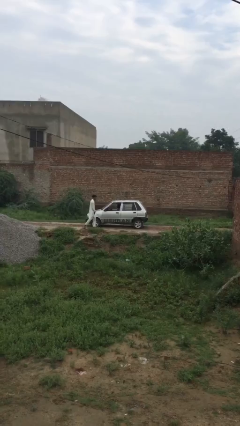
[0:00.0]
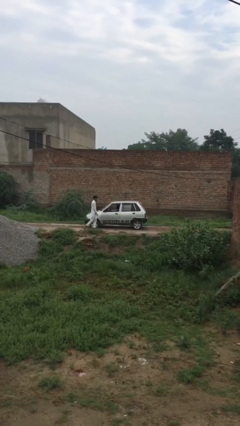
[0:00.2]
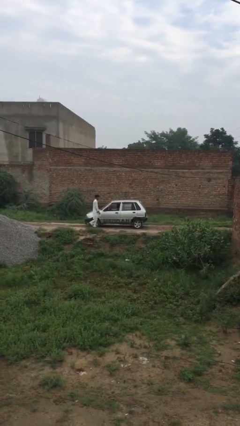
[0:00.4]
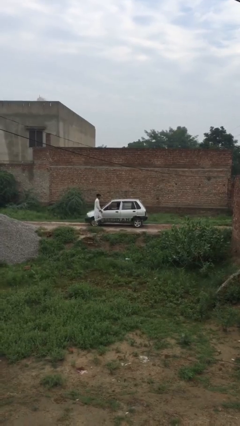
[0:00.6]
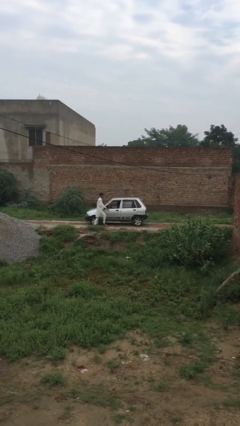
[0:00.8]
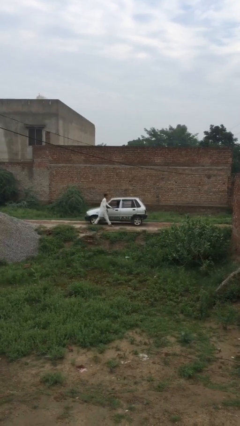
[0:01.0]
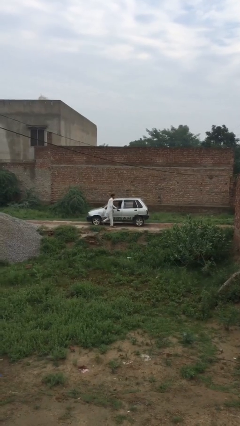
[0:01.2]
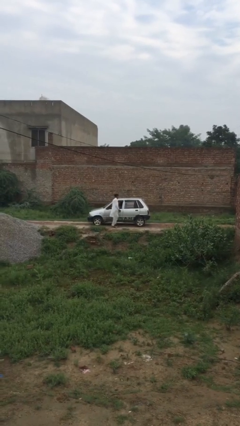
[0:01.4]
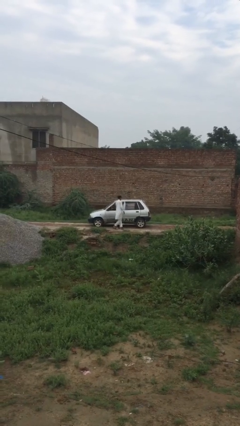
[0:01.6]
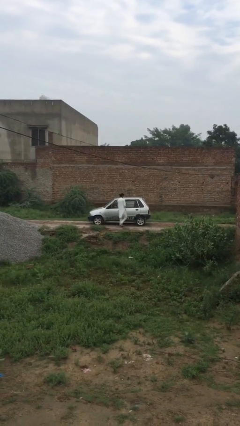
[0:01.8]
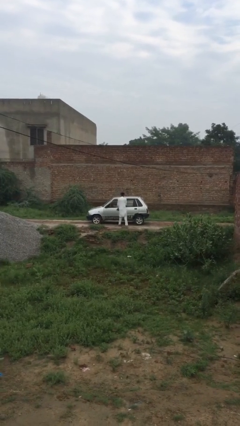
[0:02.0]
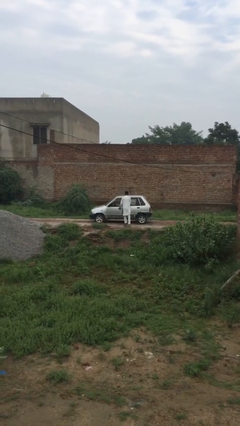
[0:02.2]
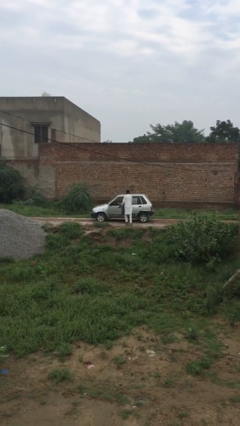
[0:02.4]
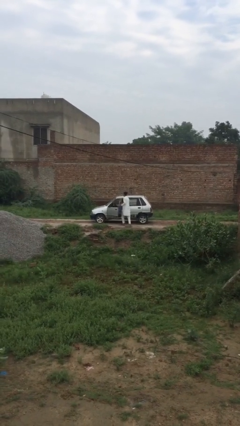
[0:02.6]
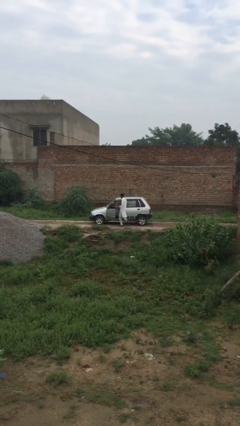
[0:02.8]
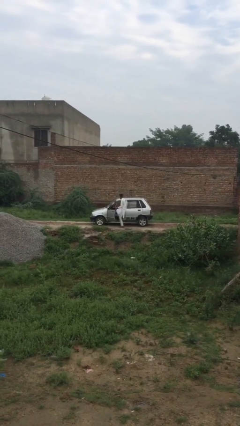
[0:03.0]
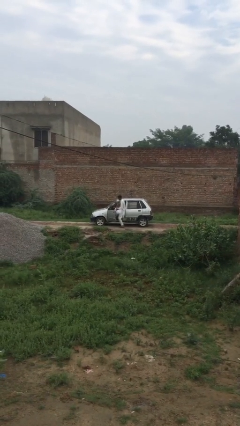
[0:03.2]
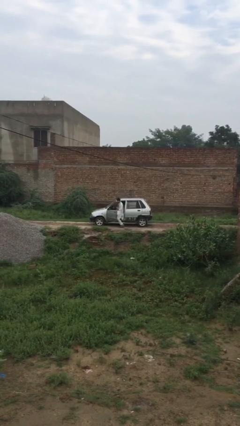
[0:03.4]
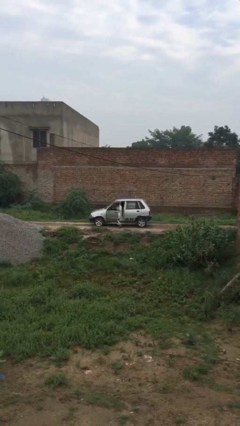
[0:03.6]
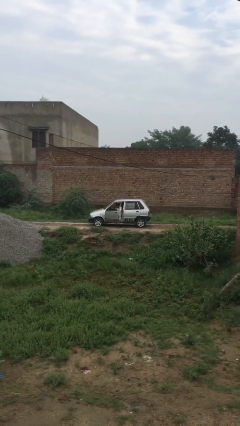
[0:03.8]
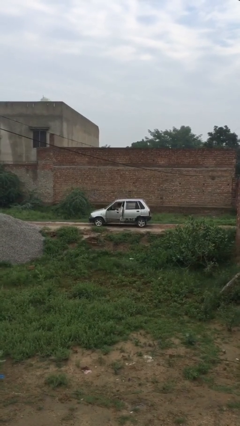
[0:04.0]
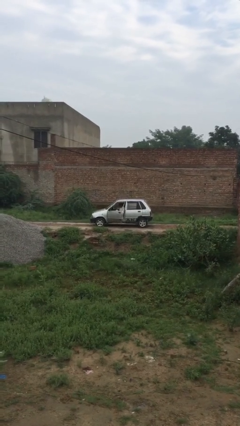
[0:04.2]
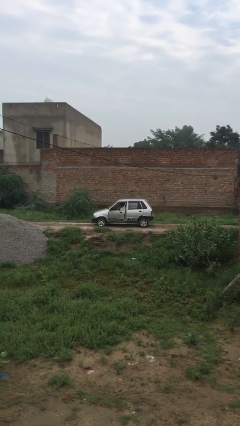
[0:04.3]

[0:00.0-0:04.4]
car picks up person

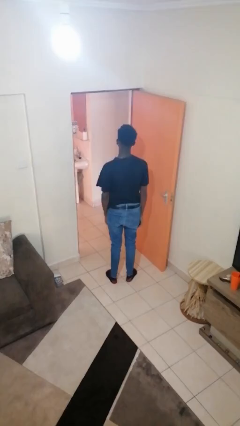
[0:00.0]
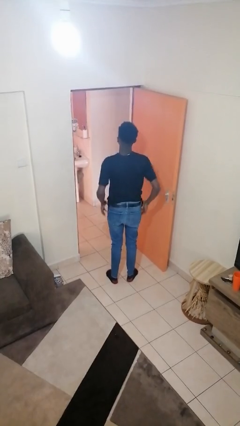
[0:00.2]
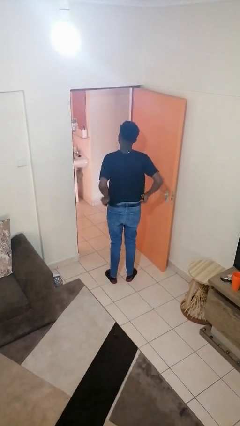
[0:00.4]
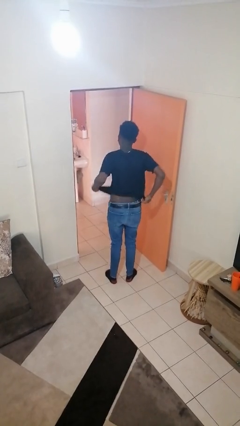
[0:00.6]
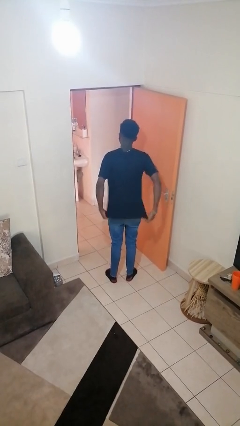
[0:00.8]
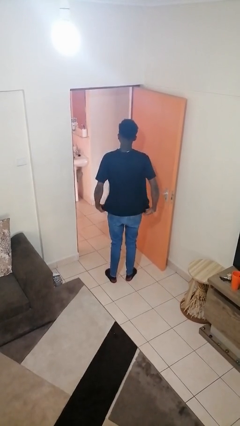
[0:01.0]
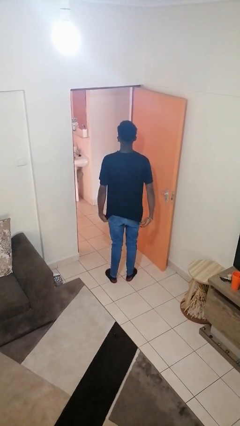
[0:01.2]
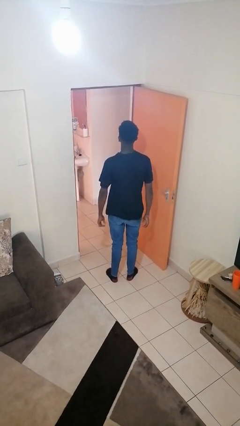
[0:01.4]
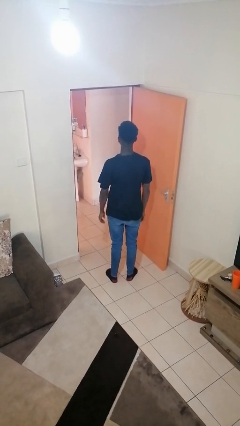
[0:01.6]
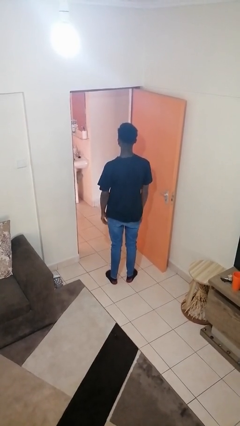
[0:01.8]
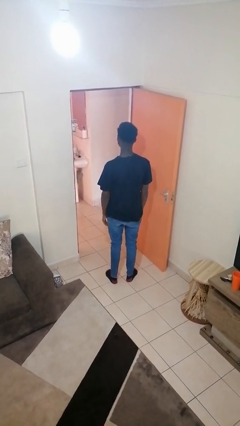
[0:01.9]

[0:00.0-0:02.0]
person untucks shirt

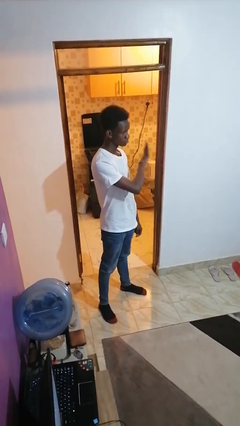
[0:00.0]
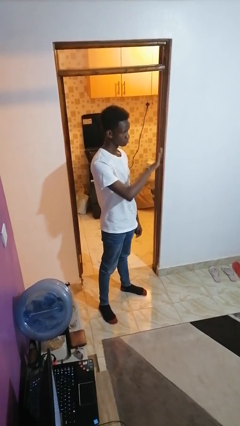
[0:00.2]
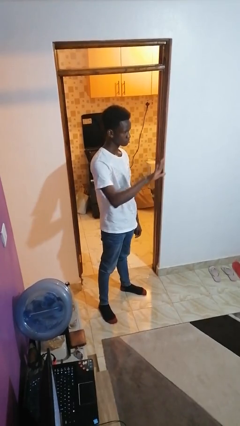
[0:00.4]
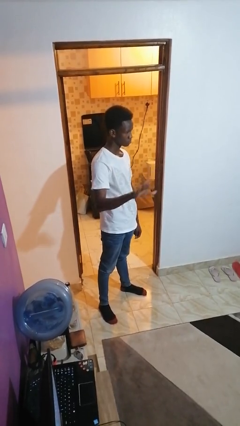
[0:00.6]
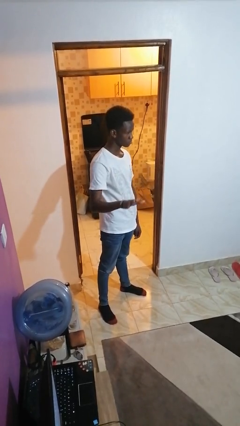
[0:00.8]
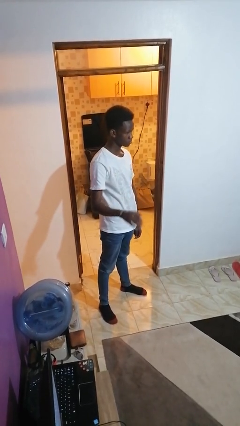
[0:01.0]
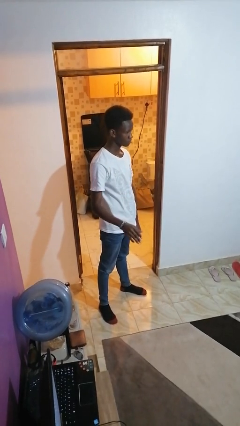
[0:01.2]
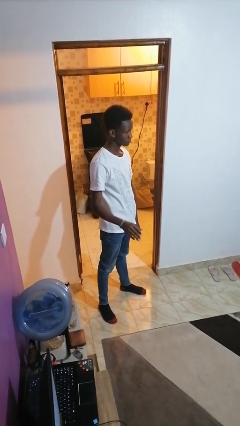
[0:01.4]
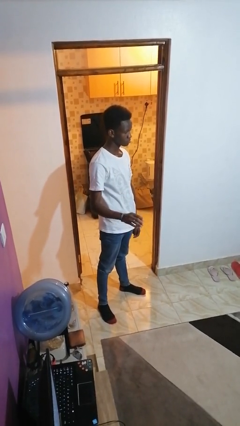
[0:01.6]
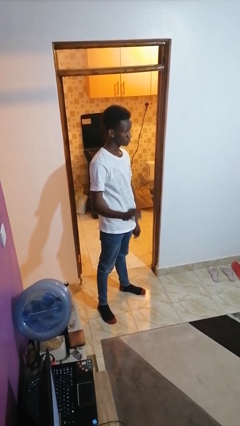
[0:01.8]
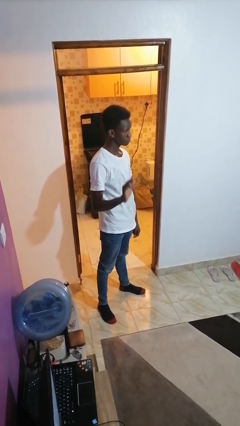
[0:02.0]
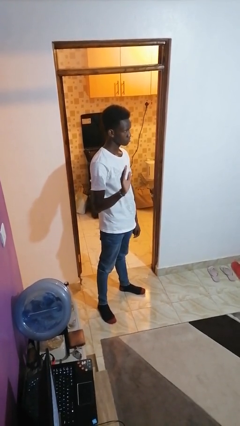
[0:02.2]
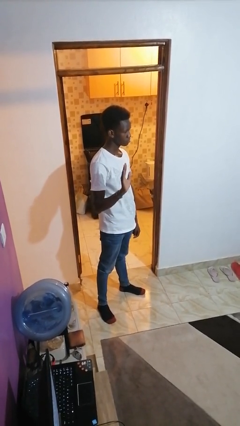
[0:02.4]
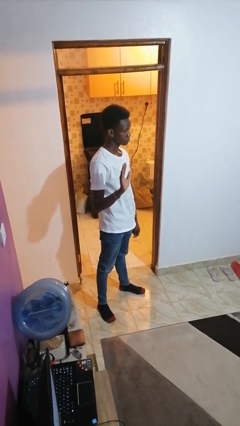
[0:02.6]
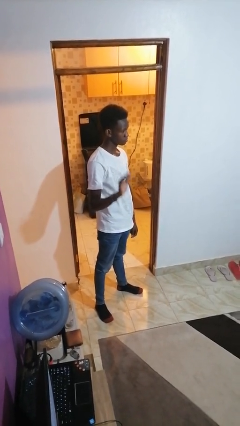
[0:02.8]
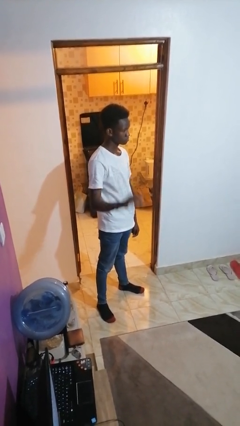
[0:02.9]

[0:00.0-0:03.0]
person gestures swipe right

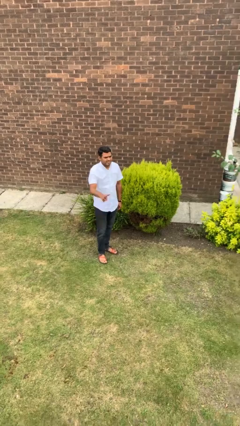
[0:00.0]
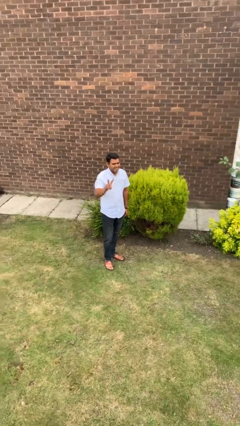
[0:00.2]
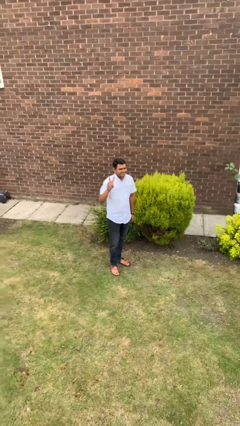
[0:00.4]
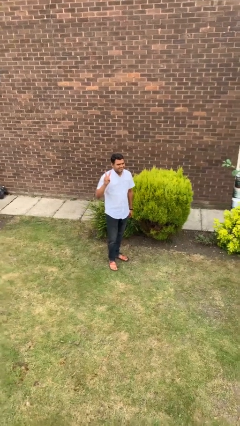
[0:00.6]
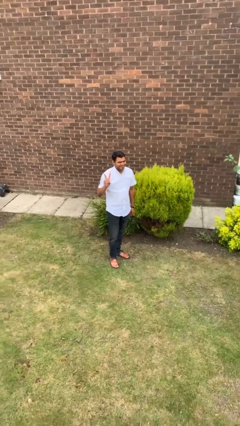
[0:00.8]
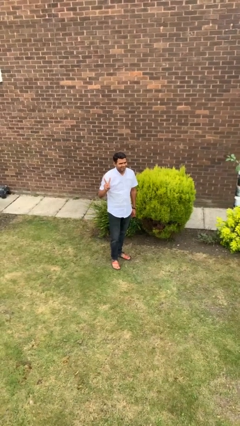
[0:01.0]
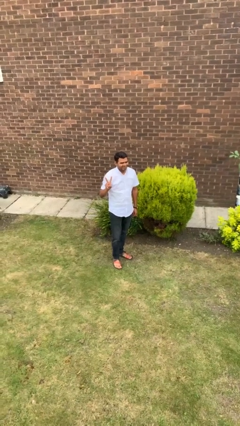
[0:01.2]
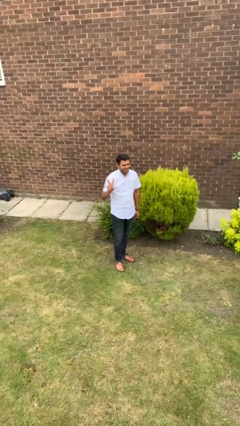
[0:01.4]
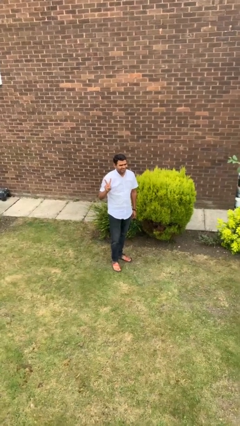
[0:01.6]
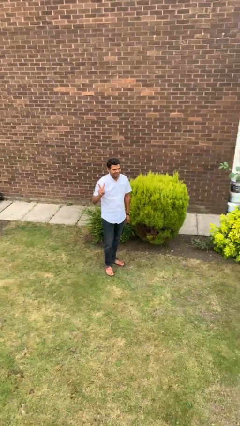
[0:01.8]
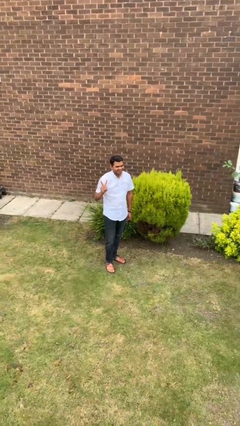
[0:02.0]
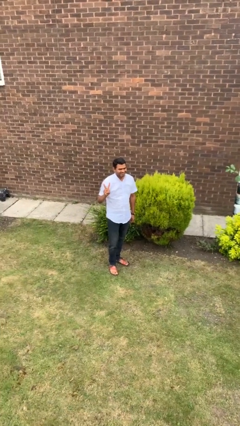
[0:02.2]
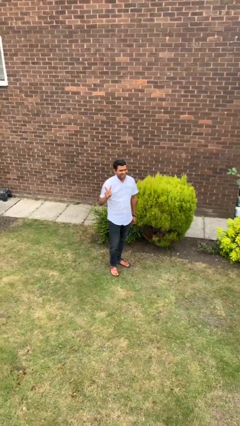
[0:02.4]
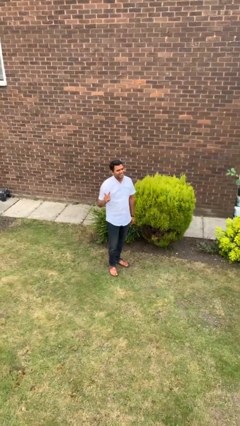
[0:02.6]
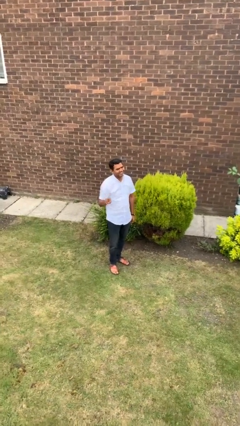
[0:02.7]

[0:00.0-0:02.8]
person gestures peace

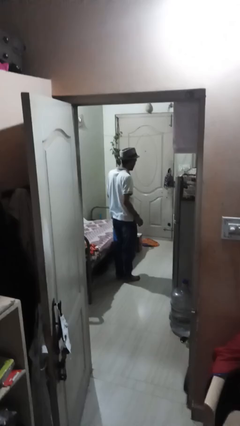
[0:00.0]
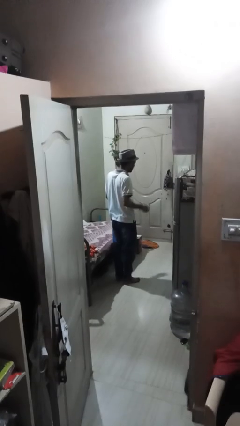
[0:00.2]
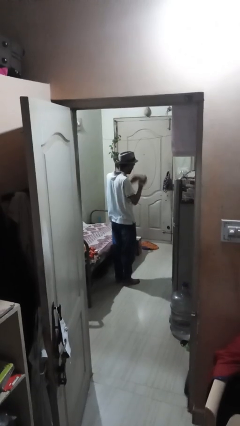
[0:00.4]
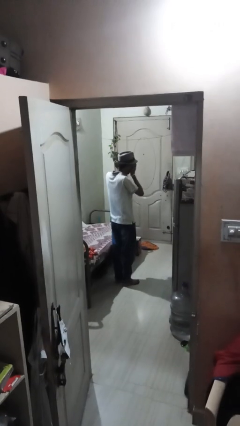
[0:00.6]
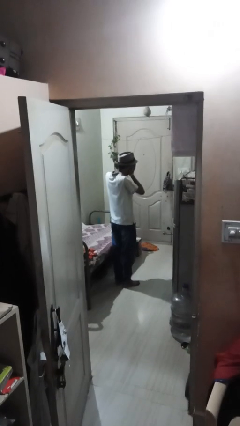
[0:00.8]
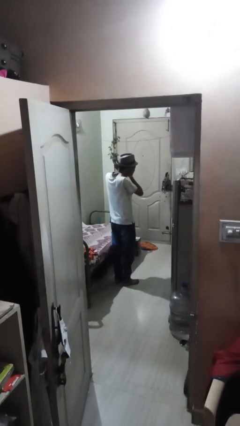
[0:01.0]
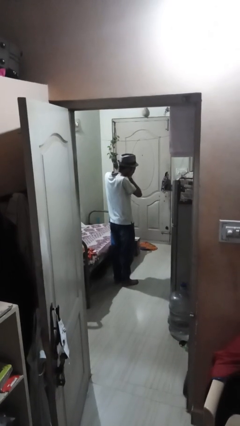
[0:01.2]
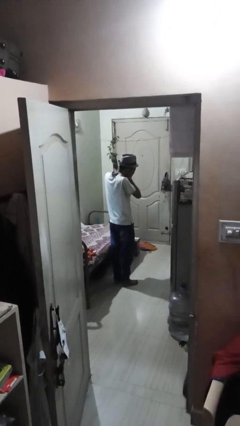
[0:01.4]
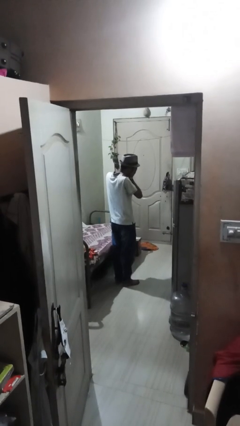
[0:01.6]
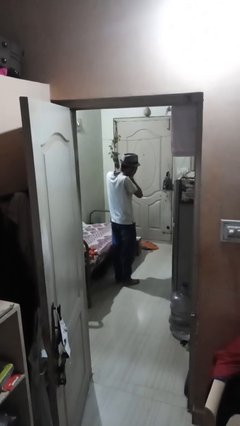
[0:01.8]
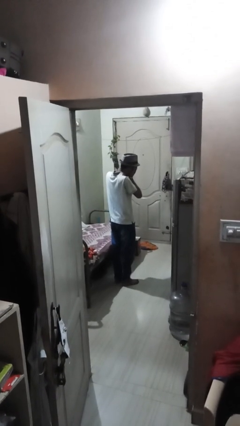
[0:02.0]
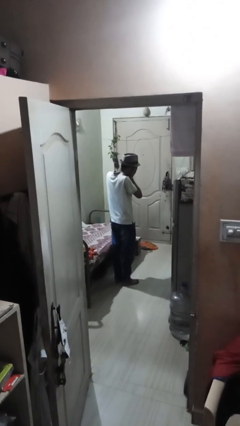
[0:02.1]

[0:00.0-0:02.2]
person covers face with hands

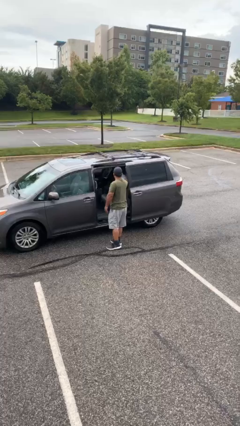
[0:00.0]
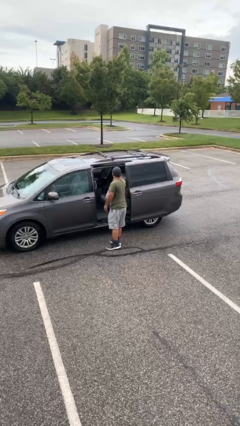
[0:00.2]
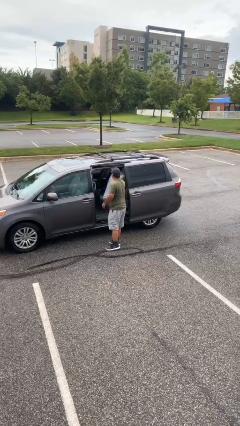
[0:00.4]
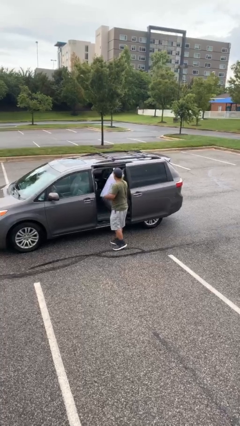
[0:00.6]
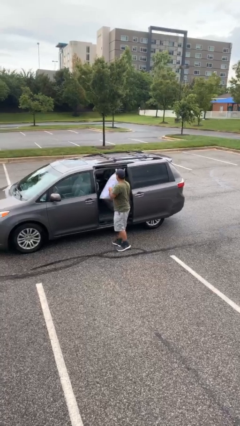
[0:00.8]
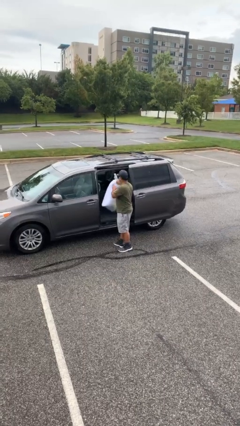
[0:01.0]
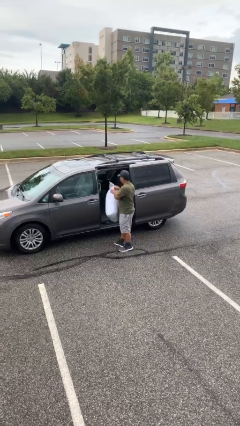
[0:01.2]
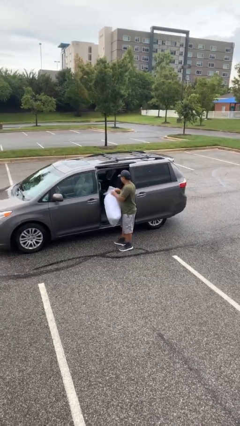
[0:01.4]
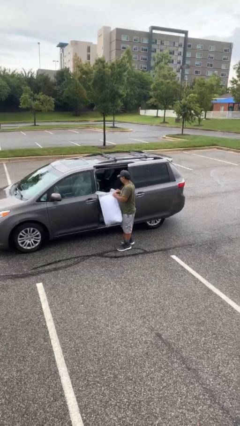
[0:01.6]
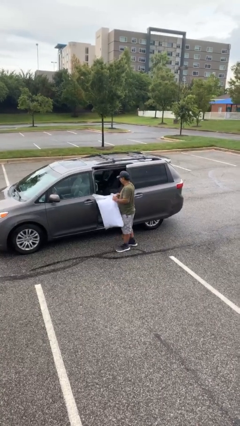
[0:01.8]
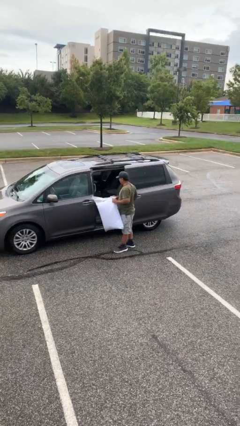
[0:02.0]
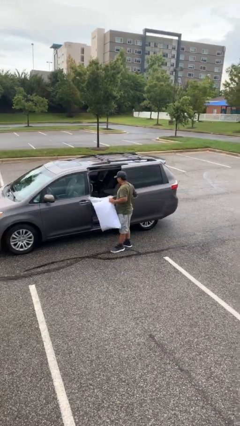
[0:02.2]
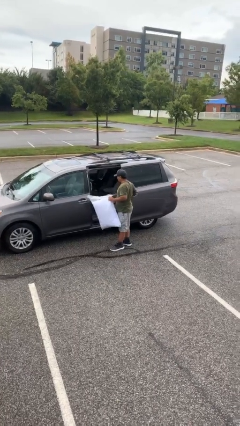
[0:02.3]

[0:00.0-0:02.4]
person unloads car

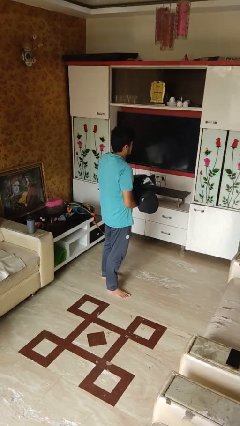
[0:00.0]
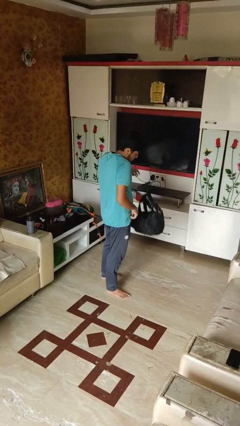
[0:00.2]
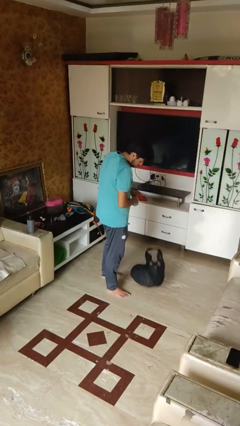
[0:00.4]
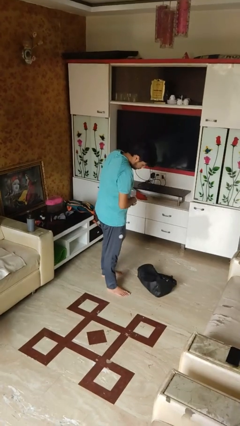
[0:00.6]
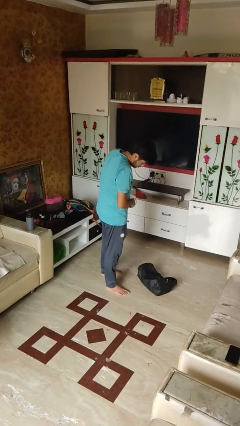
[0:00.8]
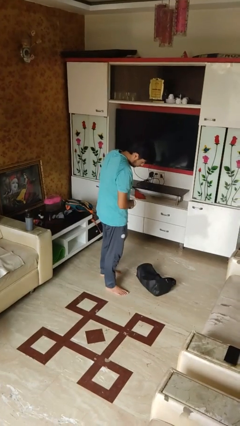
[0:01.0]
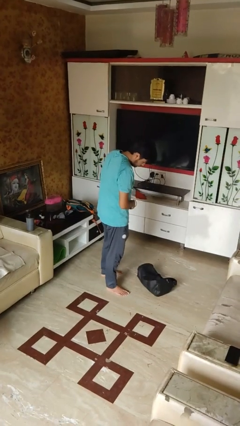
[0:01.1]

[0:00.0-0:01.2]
person drops object
